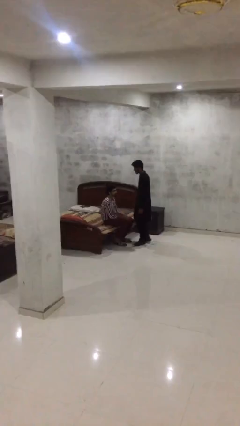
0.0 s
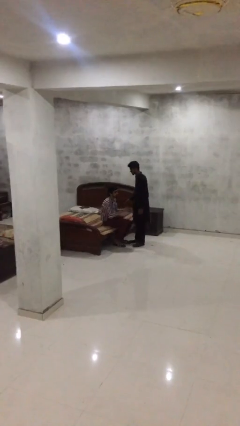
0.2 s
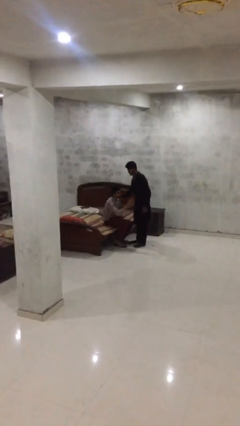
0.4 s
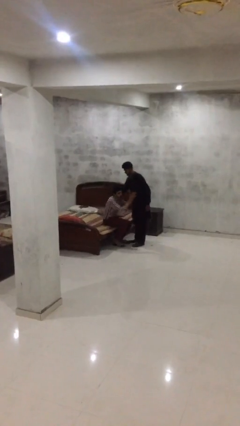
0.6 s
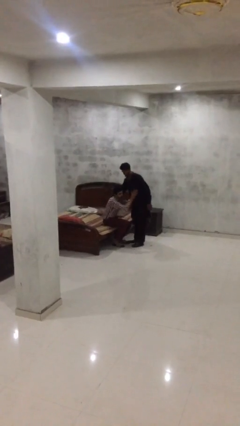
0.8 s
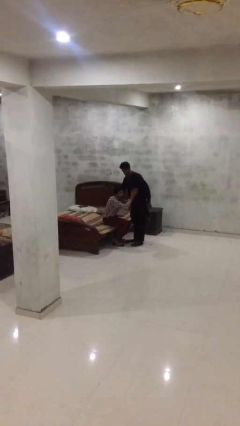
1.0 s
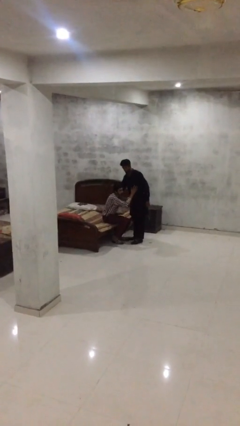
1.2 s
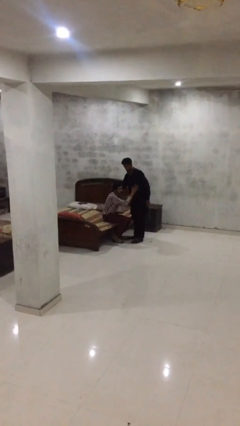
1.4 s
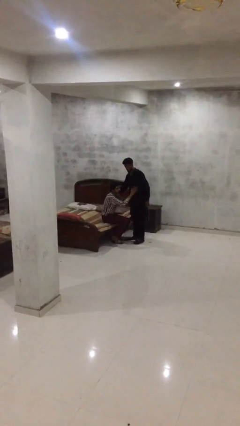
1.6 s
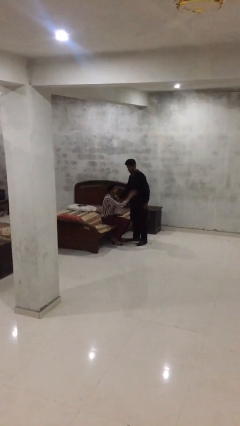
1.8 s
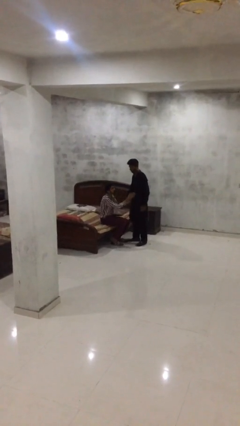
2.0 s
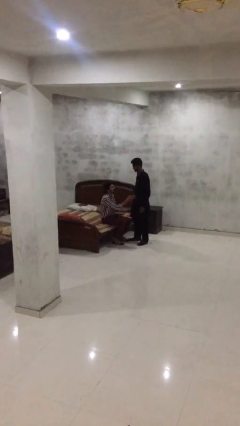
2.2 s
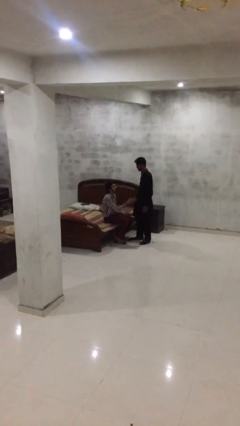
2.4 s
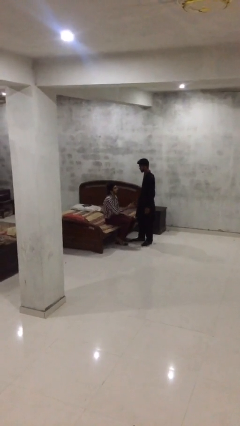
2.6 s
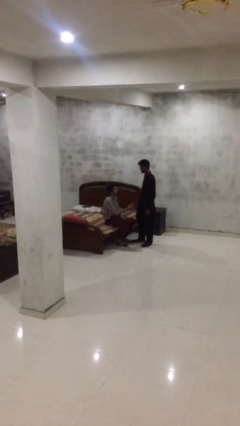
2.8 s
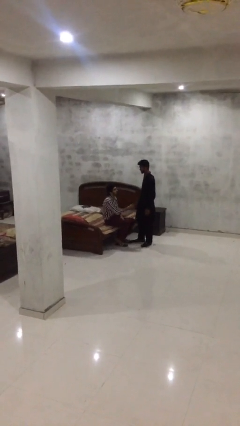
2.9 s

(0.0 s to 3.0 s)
person embraces person

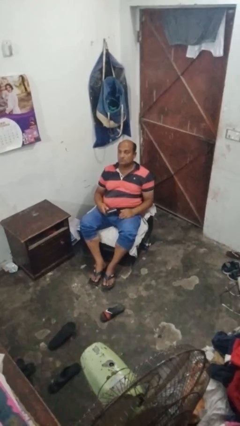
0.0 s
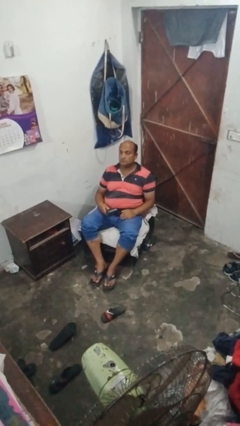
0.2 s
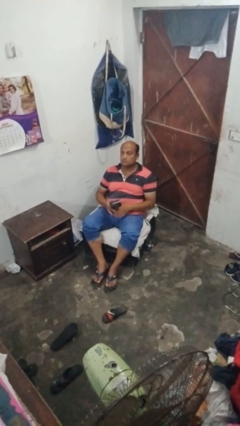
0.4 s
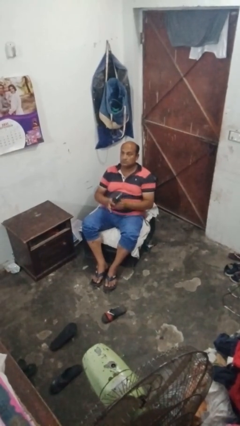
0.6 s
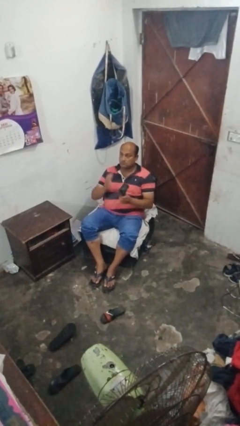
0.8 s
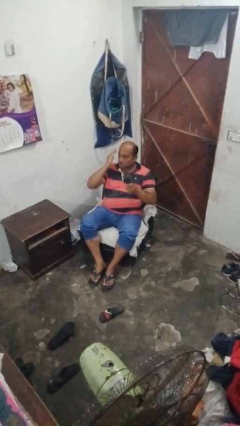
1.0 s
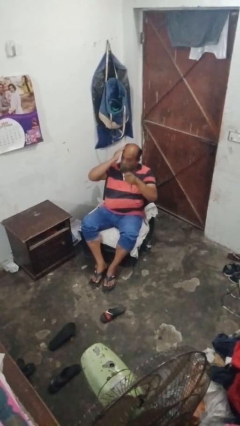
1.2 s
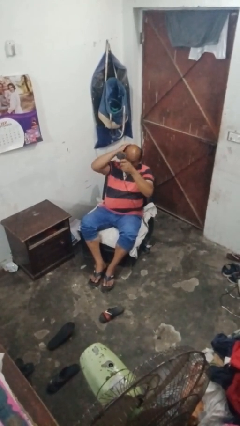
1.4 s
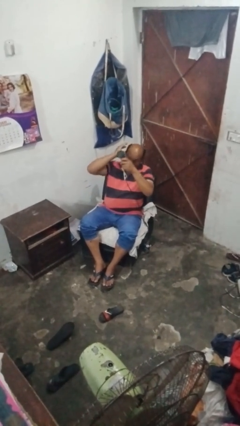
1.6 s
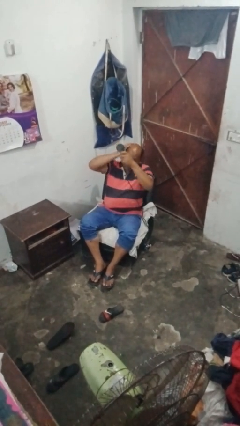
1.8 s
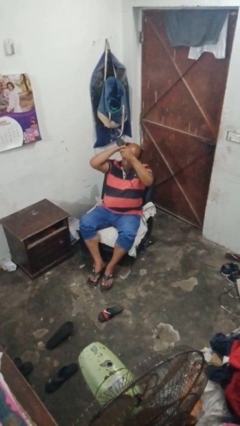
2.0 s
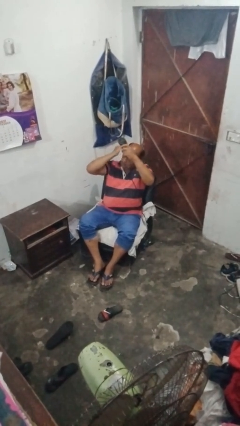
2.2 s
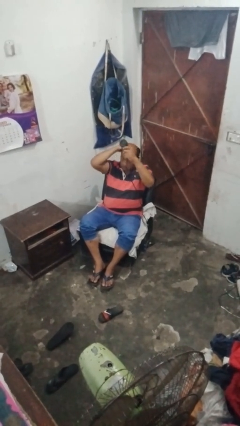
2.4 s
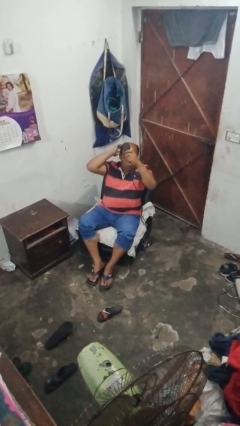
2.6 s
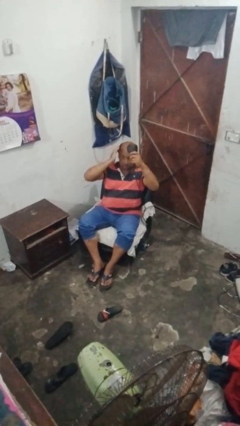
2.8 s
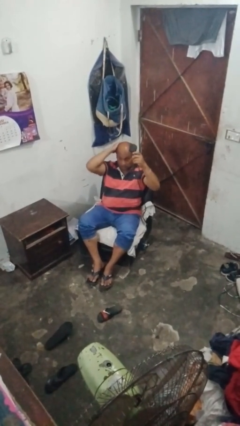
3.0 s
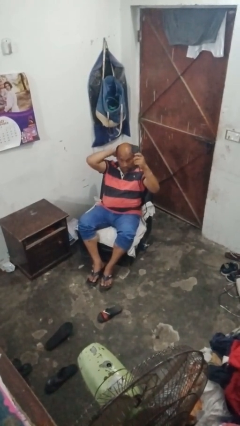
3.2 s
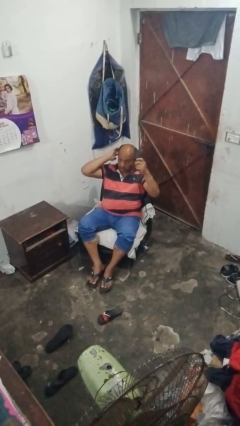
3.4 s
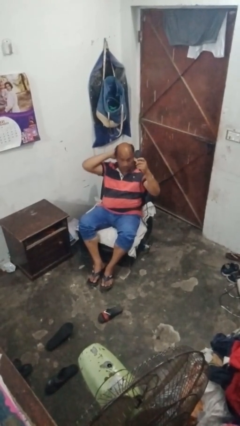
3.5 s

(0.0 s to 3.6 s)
person dries hair with hairdryer

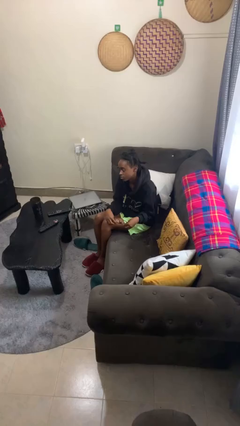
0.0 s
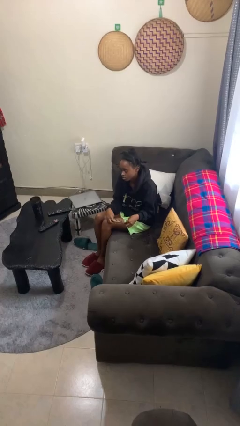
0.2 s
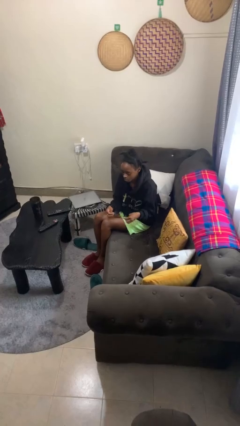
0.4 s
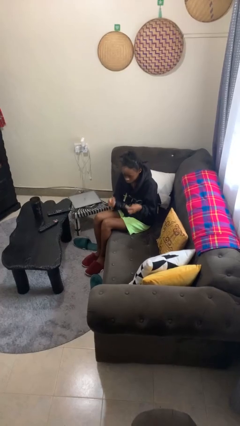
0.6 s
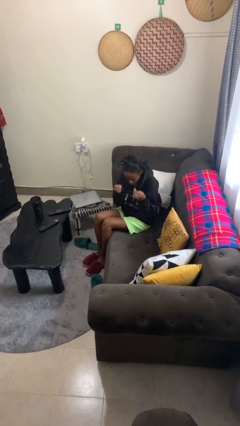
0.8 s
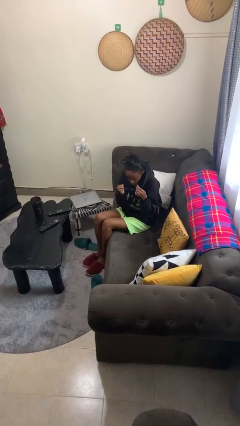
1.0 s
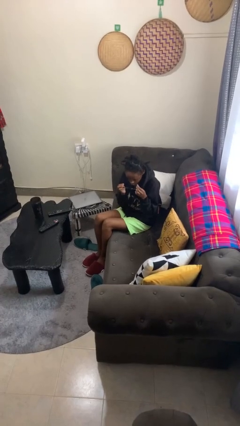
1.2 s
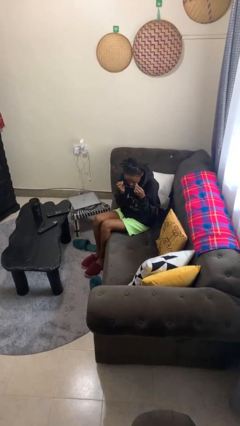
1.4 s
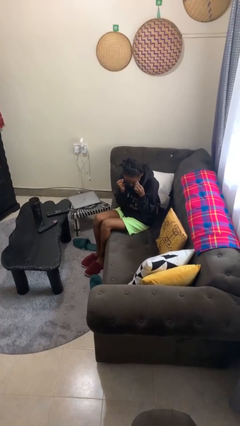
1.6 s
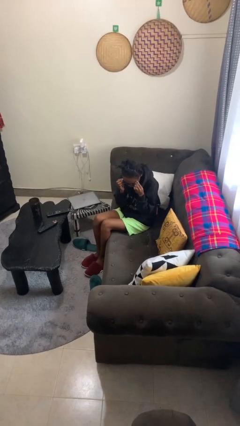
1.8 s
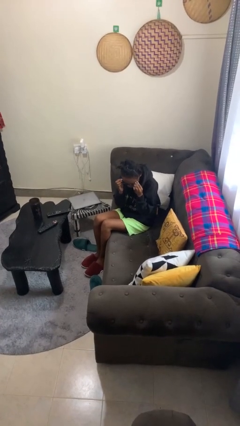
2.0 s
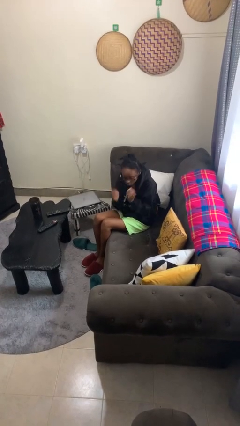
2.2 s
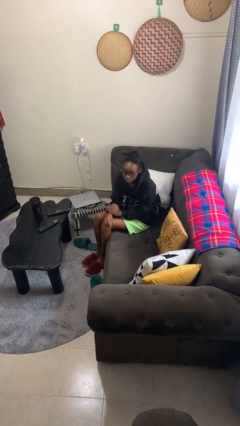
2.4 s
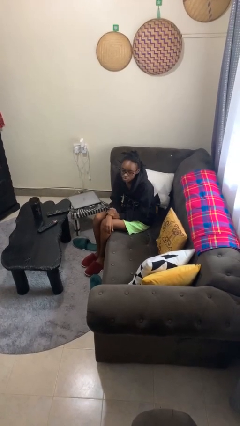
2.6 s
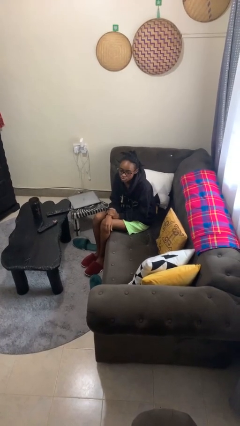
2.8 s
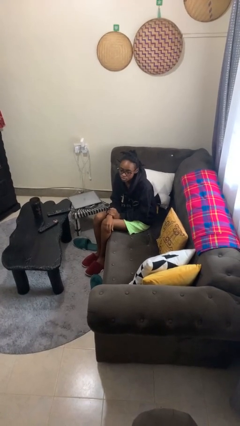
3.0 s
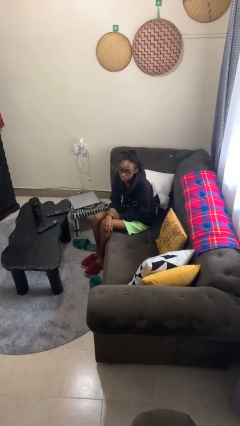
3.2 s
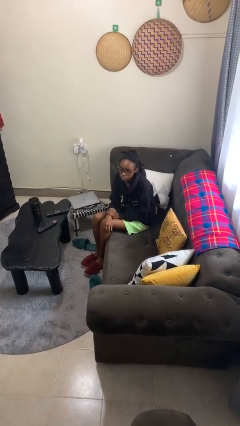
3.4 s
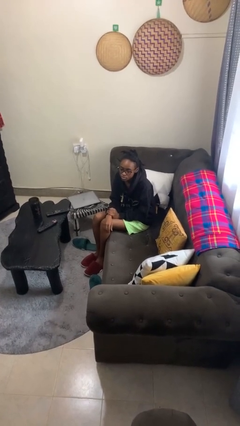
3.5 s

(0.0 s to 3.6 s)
person puts on glasses

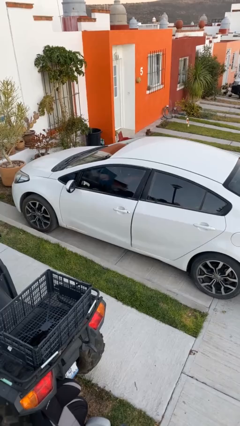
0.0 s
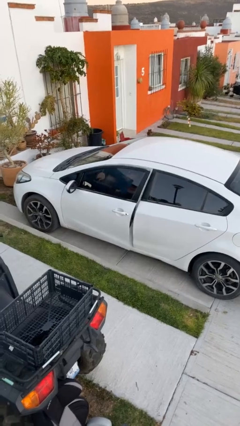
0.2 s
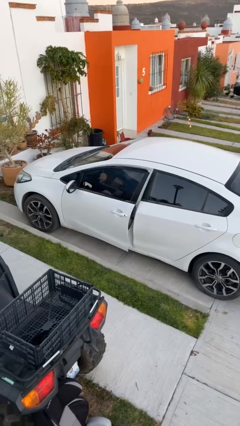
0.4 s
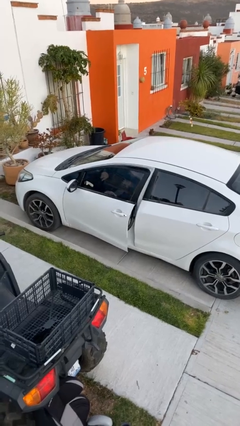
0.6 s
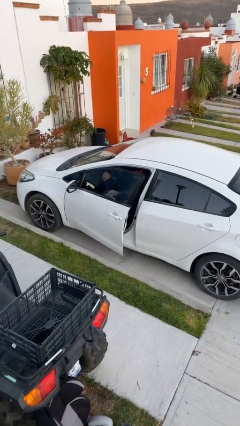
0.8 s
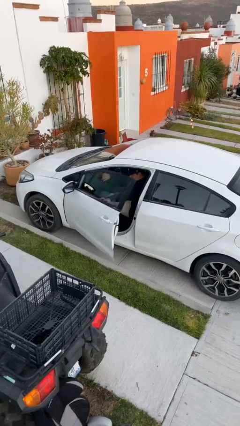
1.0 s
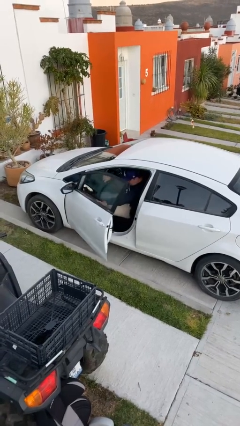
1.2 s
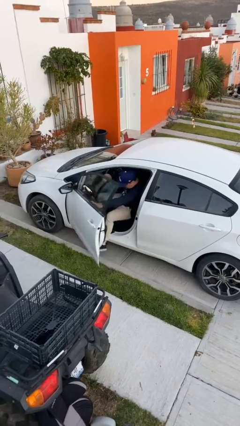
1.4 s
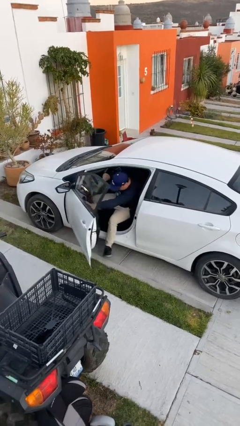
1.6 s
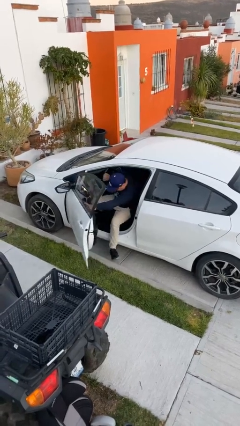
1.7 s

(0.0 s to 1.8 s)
person opens car door

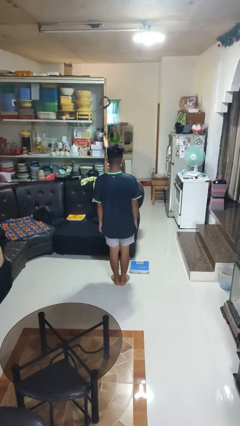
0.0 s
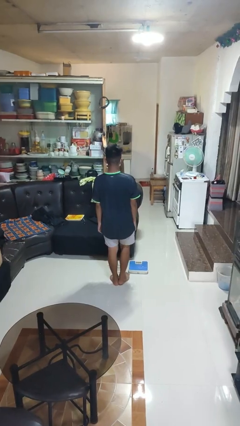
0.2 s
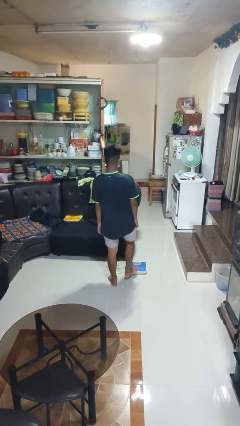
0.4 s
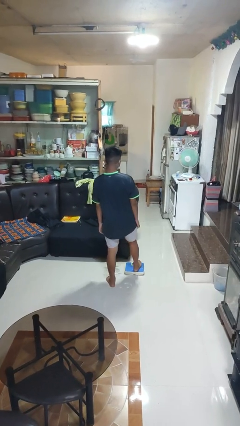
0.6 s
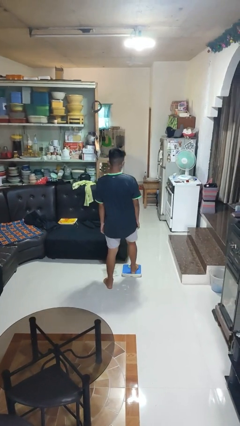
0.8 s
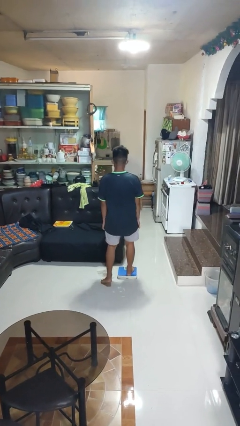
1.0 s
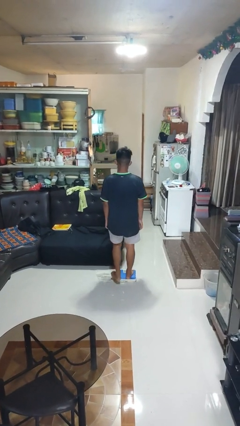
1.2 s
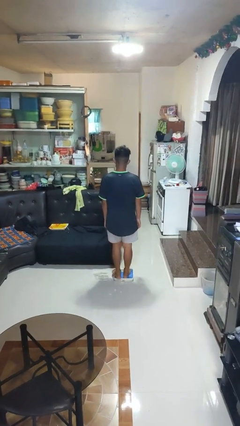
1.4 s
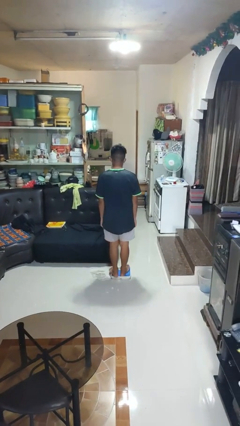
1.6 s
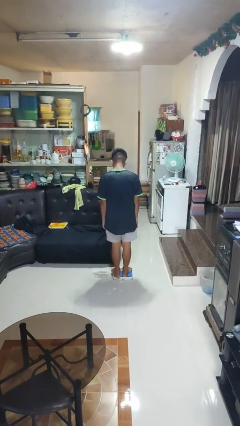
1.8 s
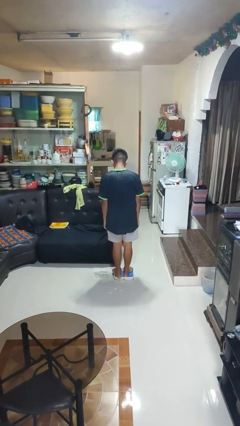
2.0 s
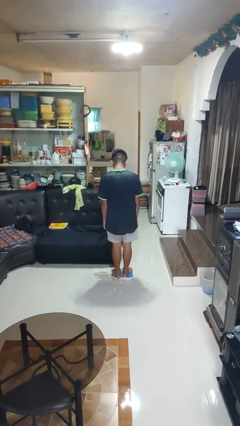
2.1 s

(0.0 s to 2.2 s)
person uses bodyweight scale

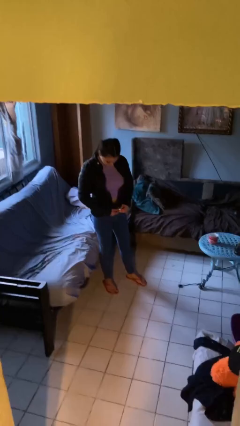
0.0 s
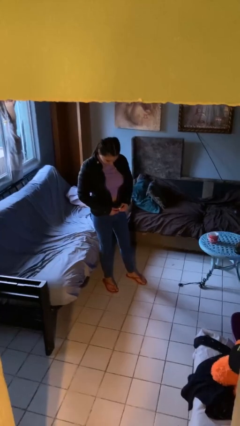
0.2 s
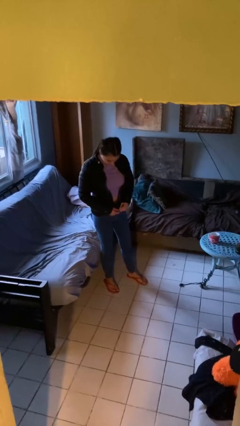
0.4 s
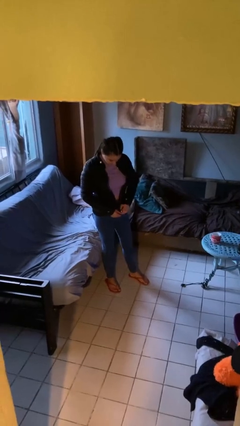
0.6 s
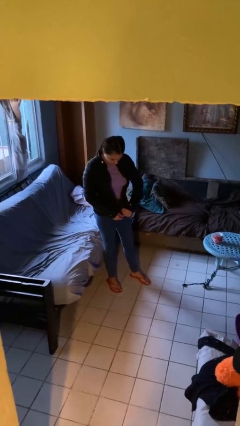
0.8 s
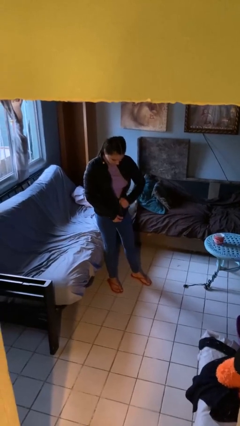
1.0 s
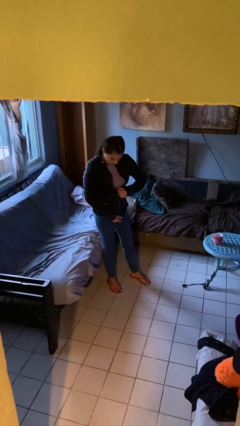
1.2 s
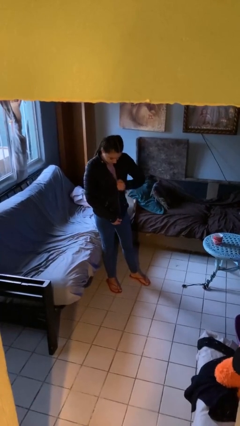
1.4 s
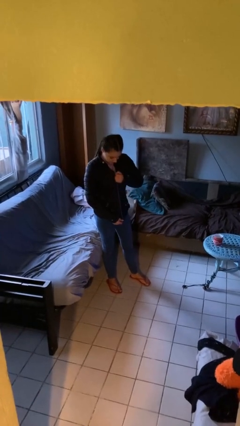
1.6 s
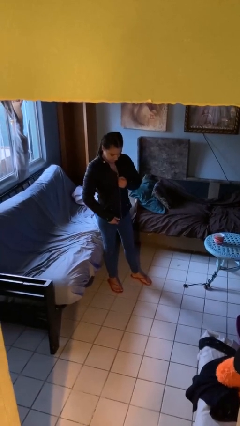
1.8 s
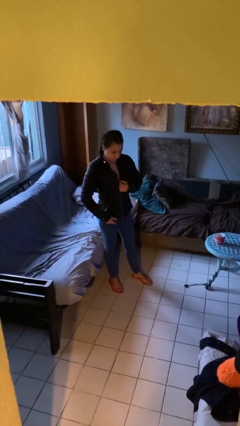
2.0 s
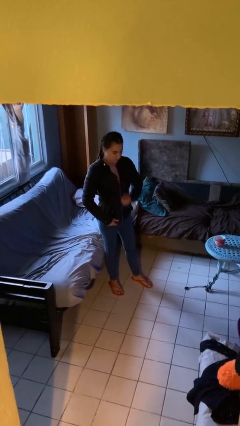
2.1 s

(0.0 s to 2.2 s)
person zips up jacket

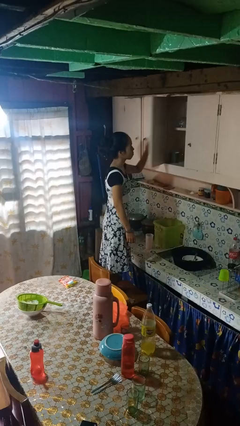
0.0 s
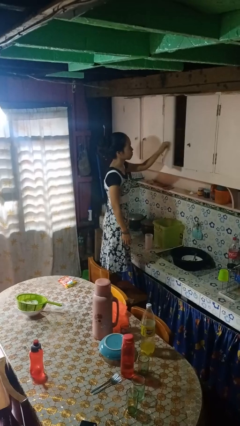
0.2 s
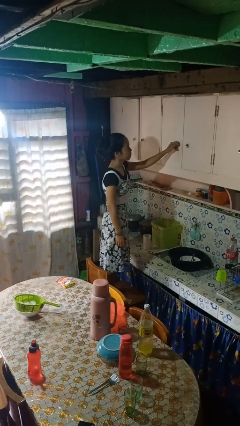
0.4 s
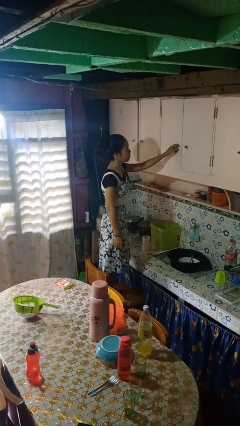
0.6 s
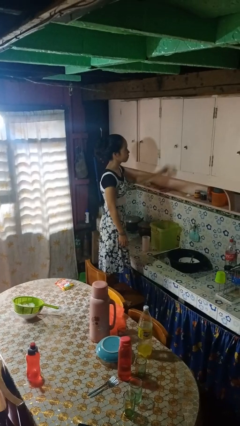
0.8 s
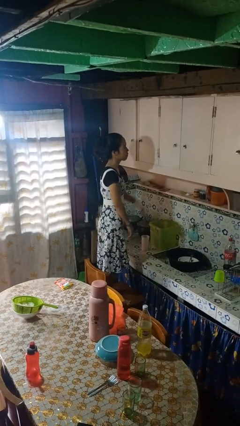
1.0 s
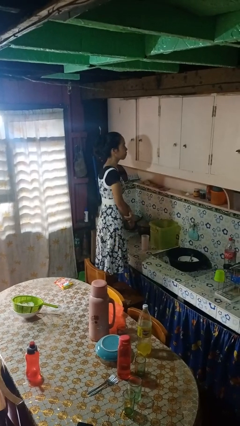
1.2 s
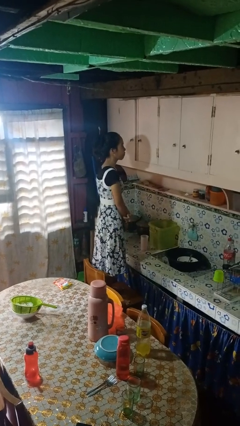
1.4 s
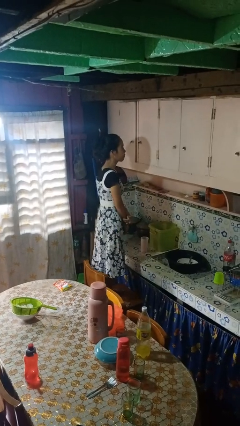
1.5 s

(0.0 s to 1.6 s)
person closes cabinet
